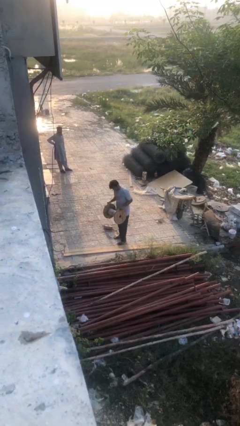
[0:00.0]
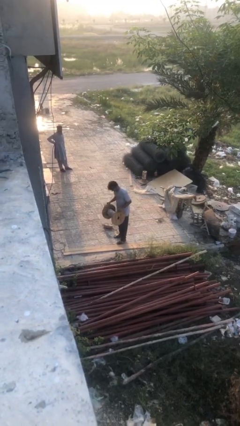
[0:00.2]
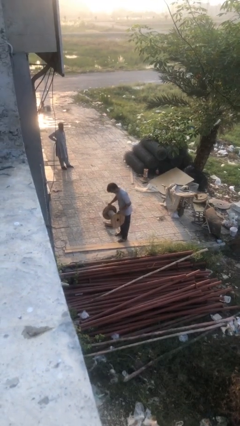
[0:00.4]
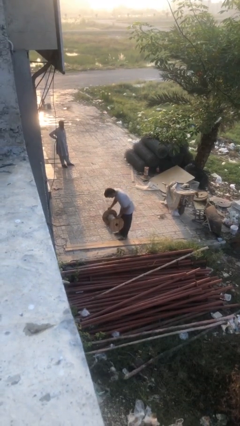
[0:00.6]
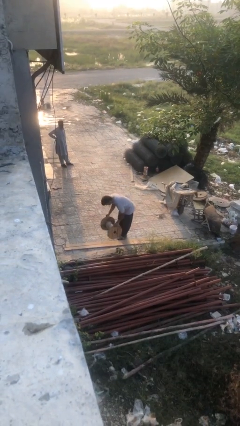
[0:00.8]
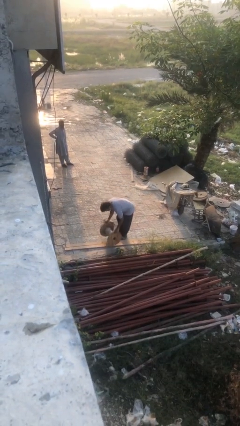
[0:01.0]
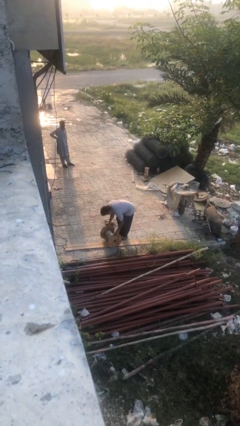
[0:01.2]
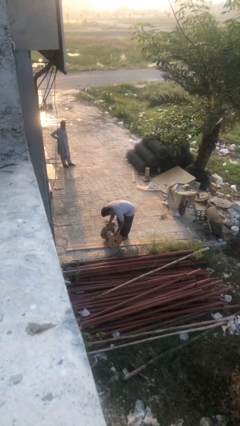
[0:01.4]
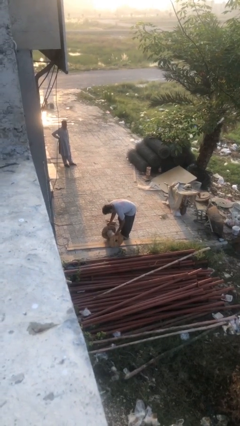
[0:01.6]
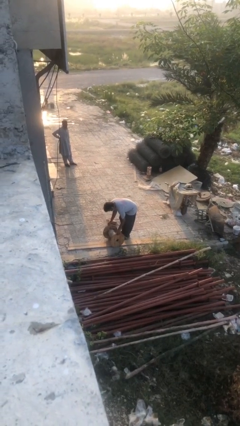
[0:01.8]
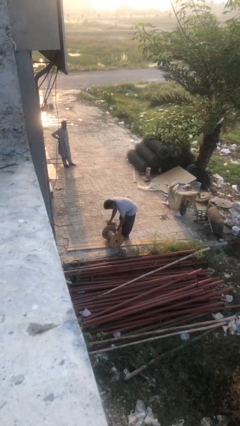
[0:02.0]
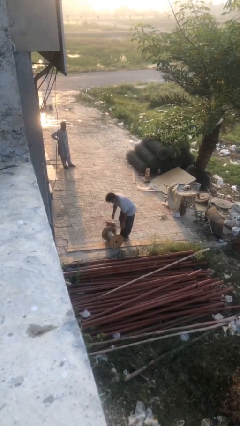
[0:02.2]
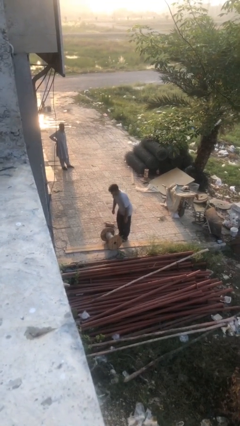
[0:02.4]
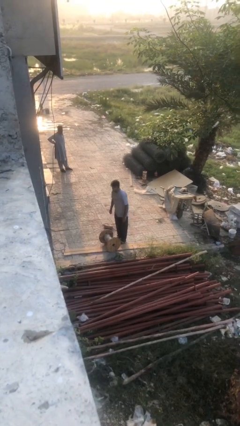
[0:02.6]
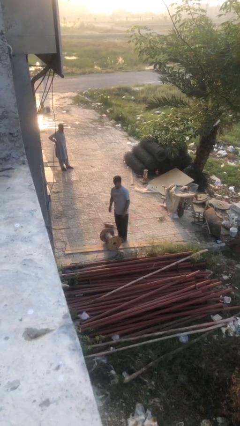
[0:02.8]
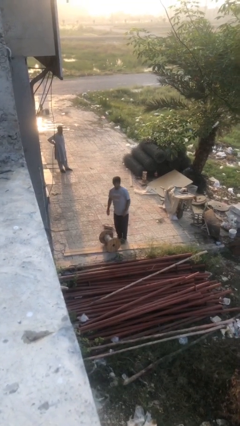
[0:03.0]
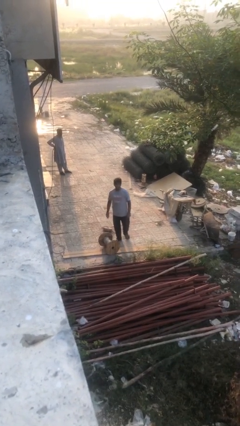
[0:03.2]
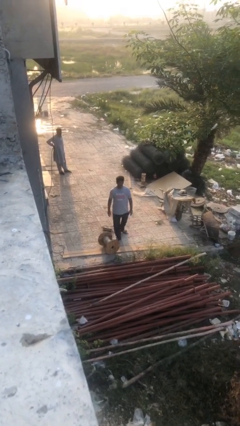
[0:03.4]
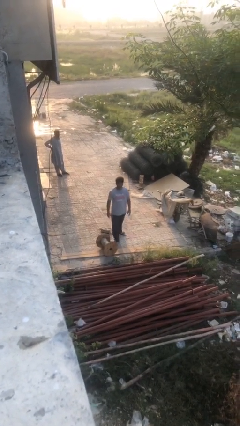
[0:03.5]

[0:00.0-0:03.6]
person puts down object on floor

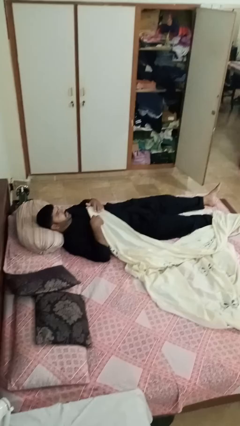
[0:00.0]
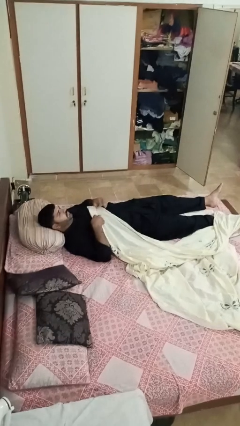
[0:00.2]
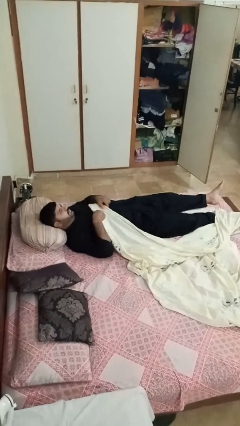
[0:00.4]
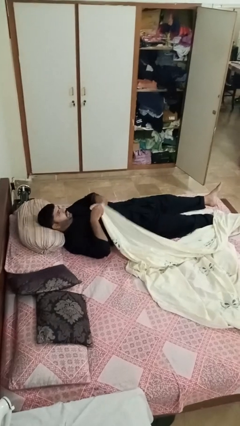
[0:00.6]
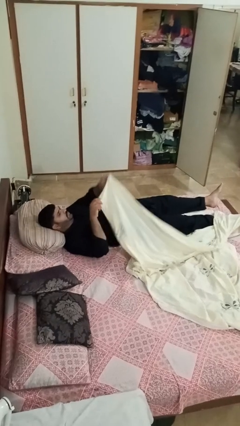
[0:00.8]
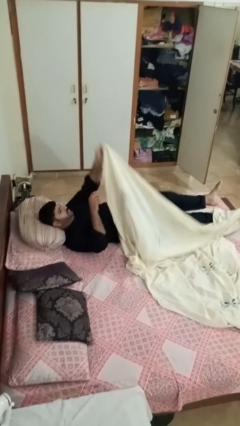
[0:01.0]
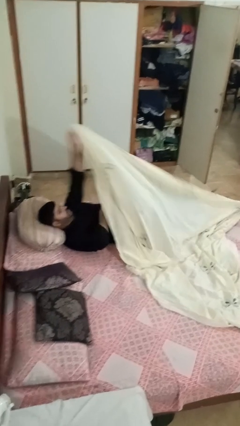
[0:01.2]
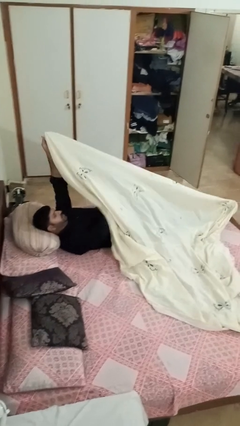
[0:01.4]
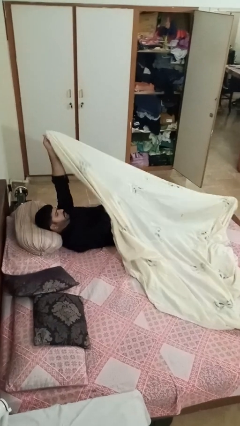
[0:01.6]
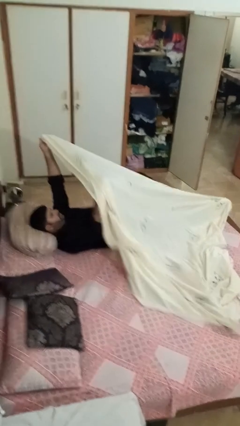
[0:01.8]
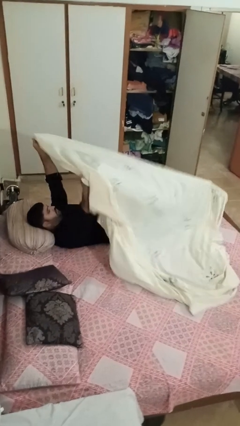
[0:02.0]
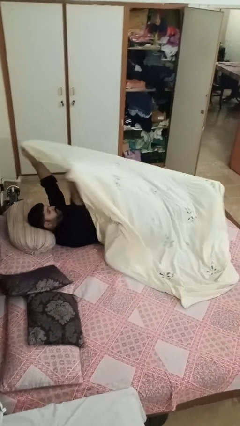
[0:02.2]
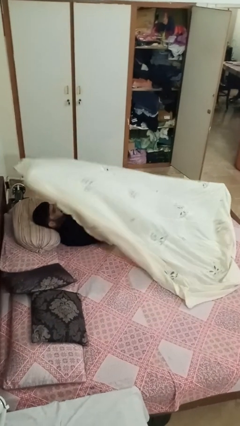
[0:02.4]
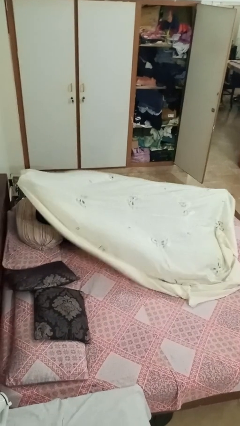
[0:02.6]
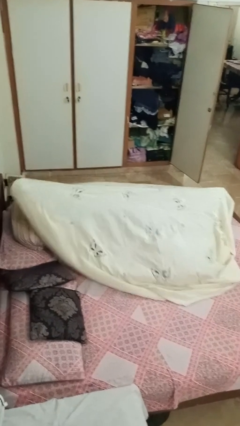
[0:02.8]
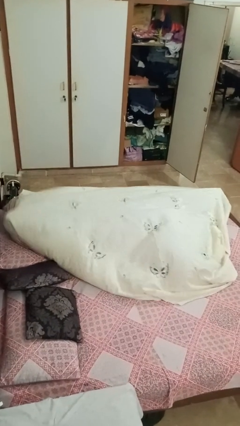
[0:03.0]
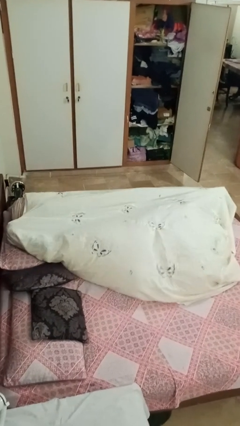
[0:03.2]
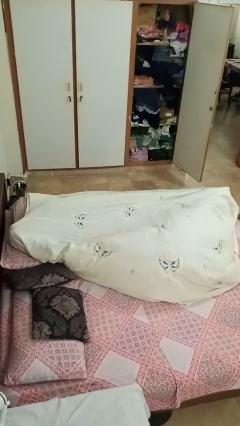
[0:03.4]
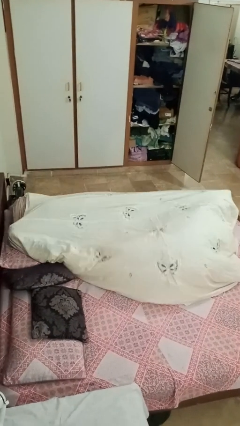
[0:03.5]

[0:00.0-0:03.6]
person covers with bedsheets

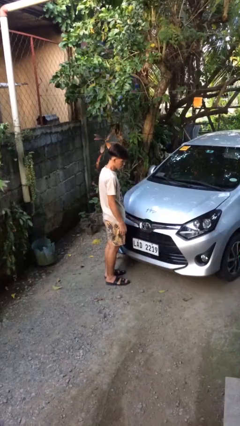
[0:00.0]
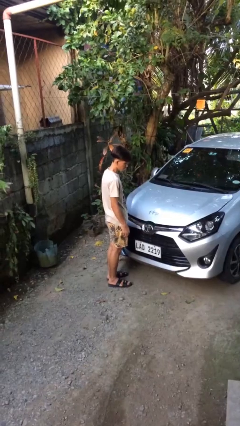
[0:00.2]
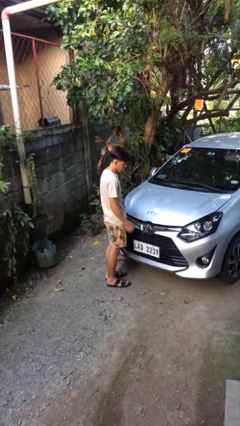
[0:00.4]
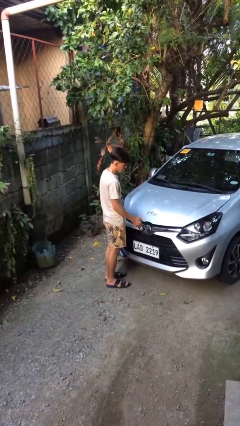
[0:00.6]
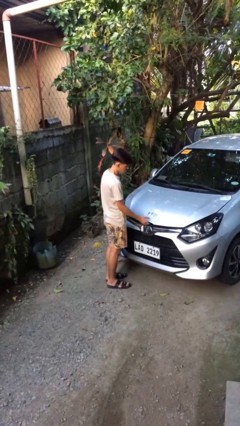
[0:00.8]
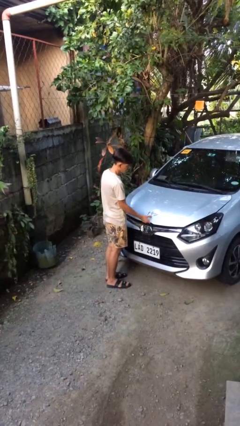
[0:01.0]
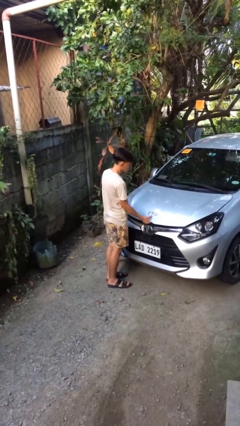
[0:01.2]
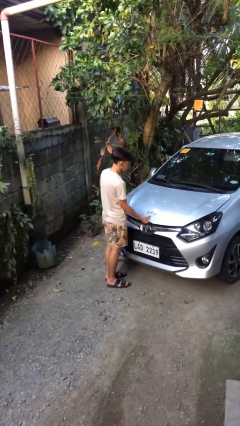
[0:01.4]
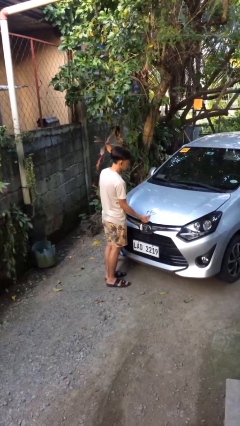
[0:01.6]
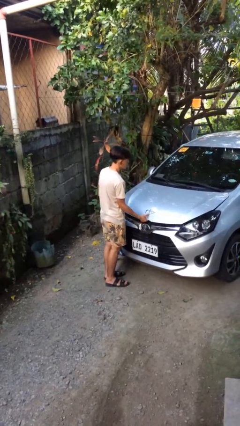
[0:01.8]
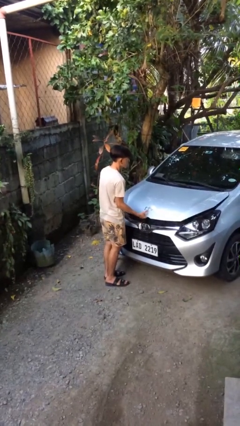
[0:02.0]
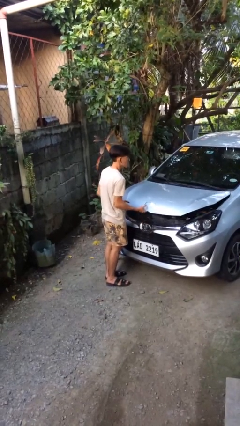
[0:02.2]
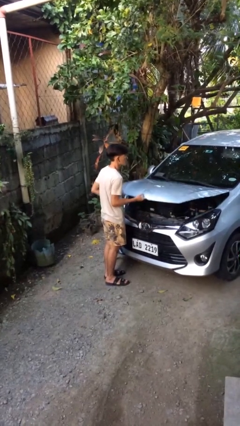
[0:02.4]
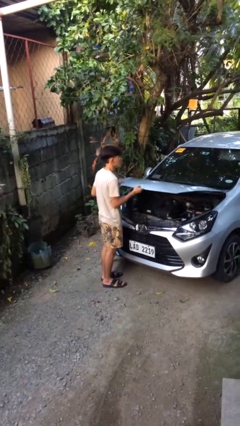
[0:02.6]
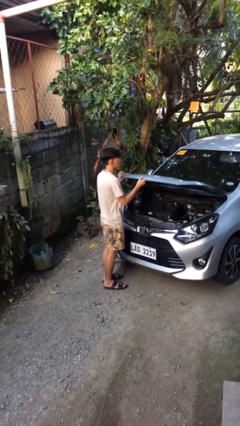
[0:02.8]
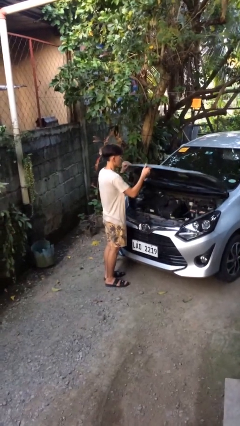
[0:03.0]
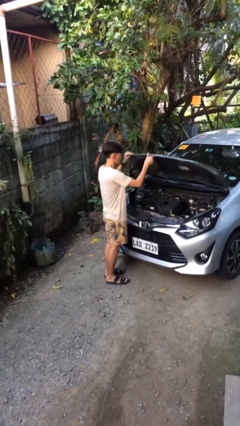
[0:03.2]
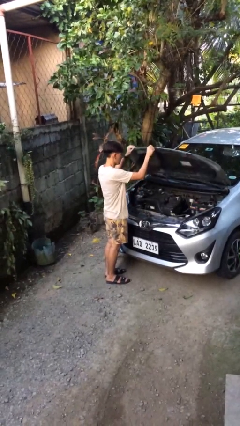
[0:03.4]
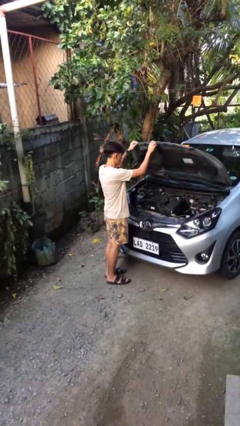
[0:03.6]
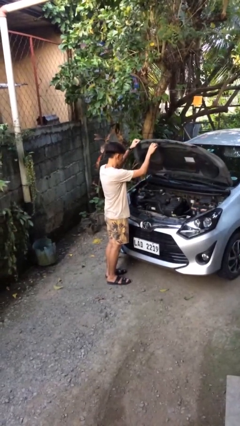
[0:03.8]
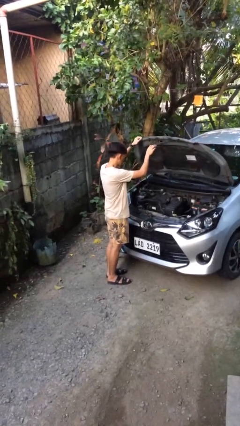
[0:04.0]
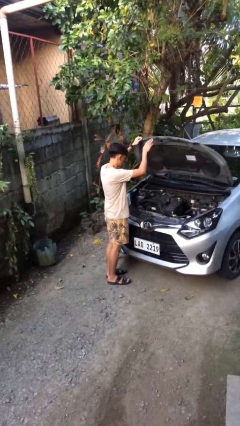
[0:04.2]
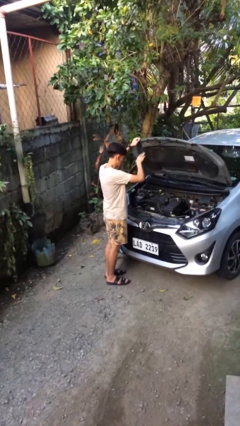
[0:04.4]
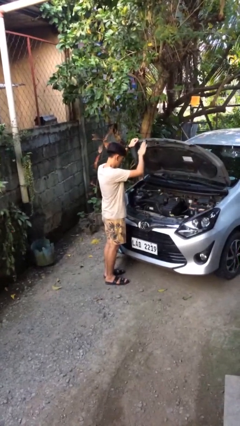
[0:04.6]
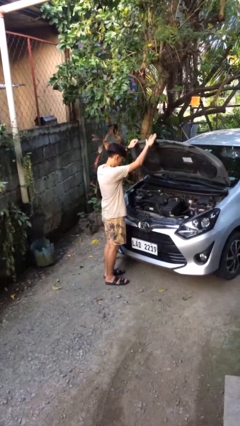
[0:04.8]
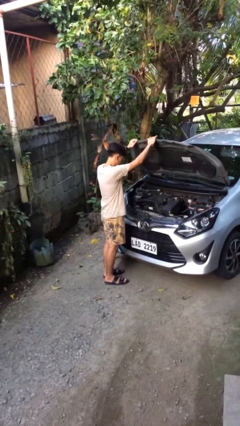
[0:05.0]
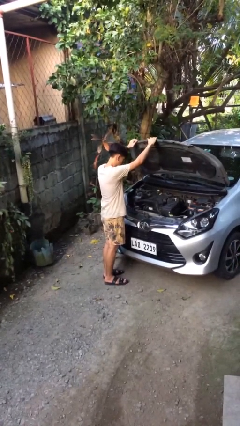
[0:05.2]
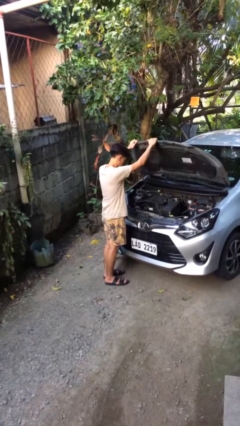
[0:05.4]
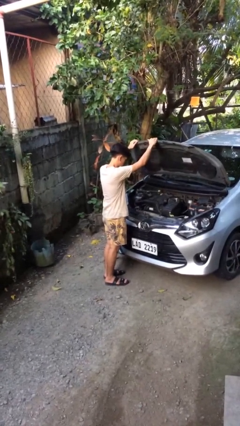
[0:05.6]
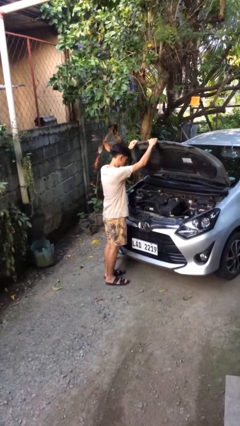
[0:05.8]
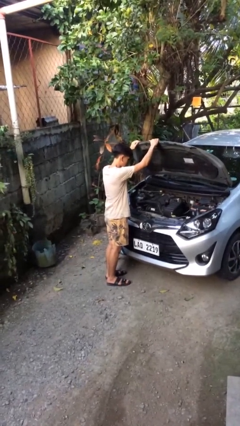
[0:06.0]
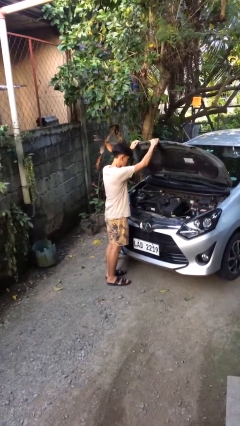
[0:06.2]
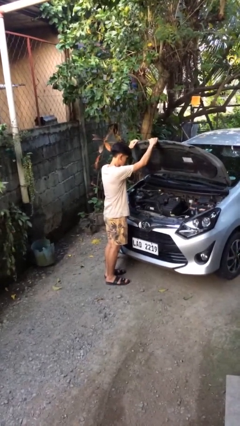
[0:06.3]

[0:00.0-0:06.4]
person opens car hood

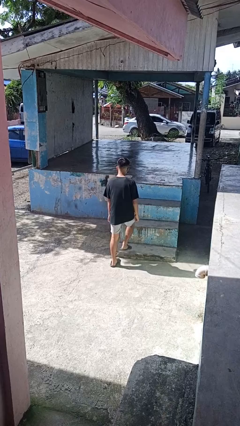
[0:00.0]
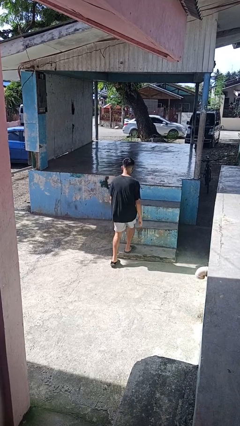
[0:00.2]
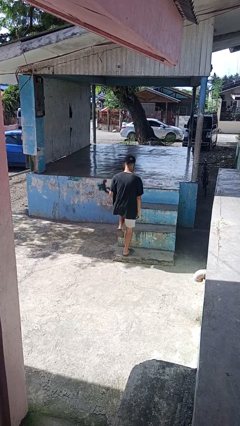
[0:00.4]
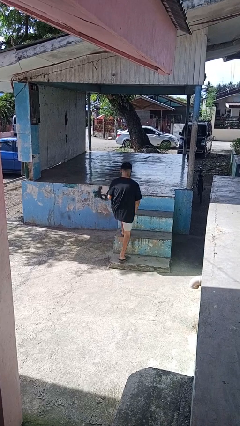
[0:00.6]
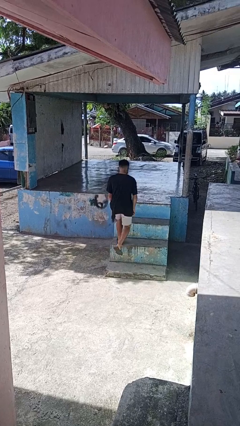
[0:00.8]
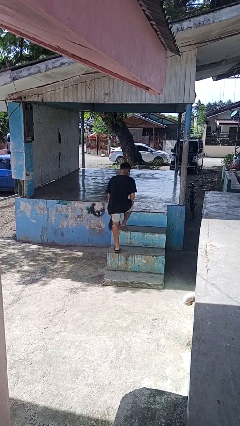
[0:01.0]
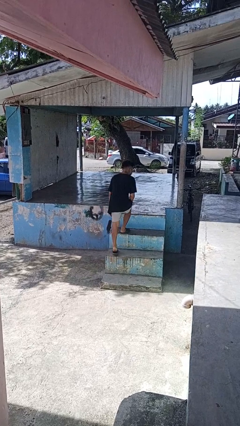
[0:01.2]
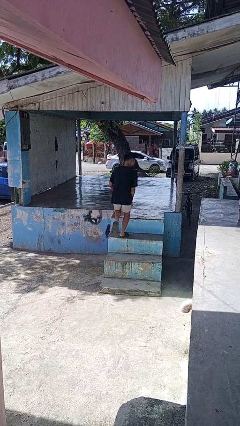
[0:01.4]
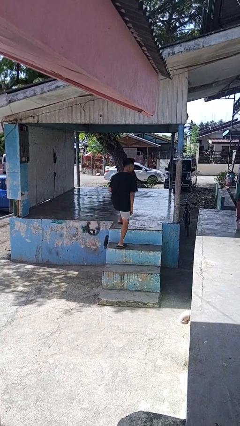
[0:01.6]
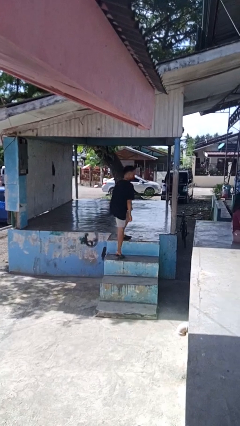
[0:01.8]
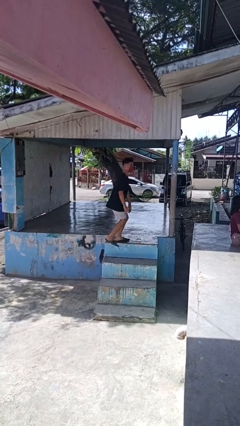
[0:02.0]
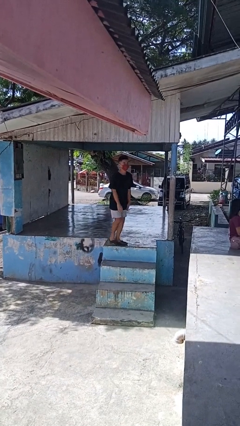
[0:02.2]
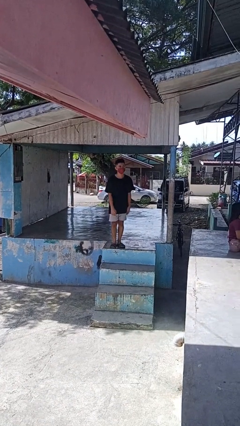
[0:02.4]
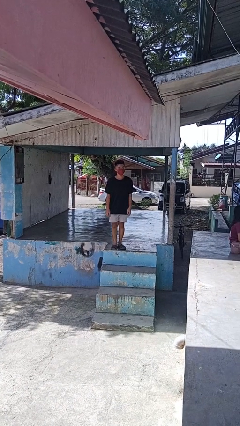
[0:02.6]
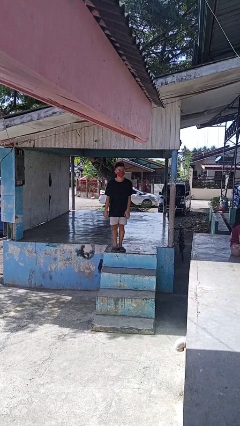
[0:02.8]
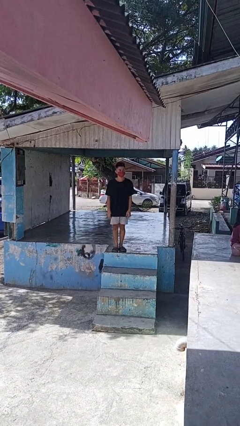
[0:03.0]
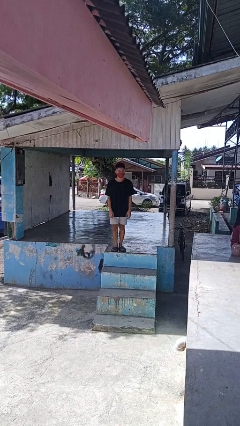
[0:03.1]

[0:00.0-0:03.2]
person climbs up stairs

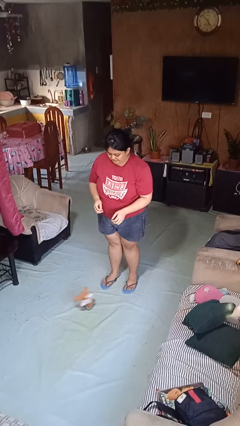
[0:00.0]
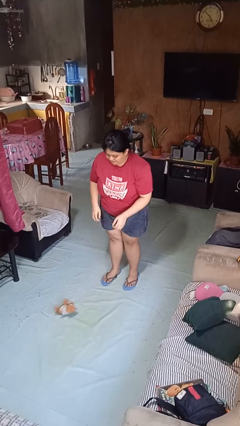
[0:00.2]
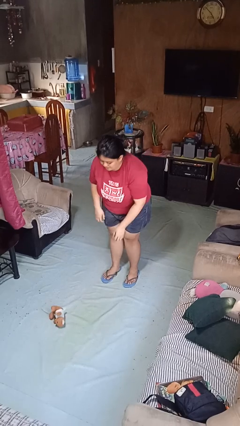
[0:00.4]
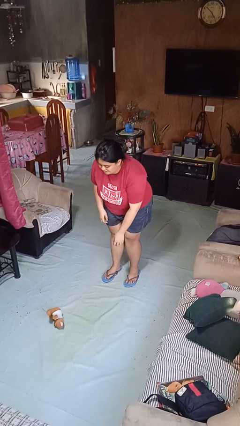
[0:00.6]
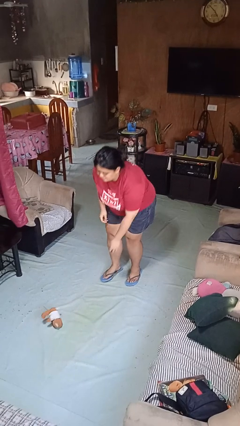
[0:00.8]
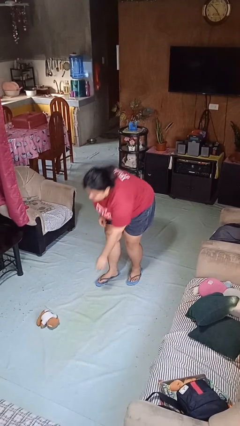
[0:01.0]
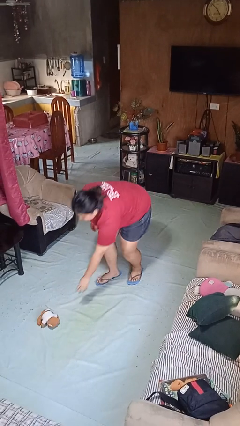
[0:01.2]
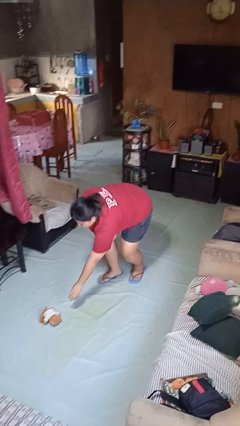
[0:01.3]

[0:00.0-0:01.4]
person picks up object from floor
